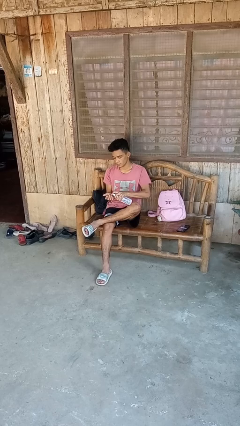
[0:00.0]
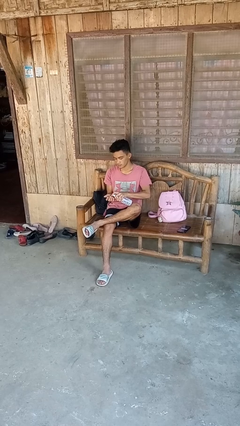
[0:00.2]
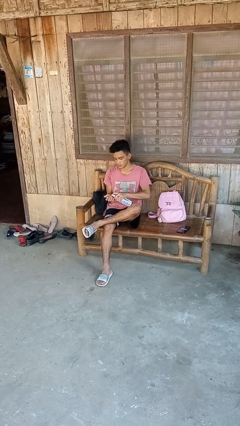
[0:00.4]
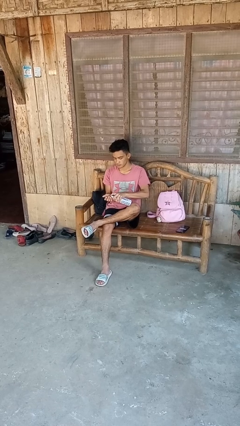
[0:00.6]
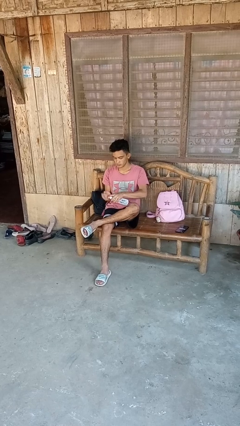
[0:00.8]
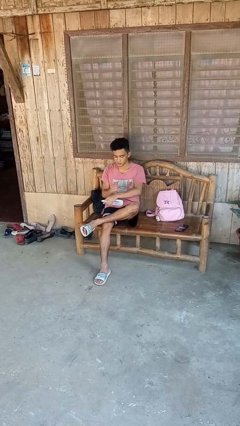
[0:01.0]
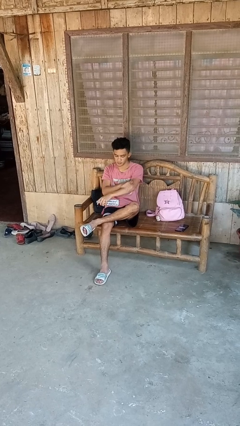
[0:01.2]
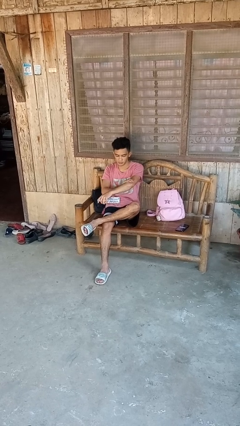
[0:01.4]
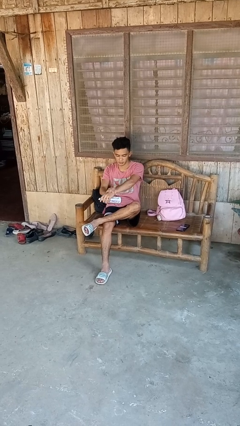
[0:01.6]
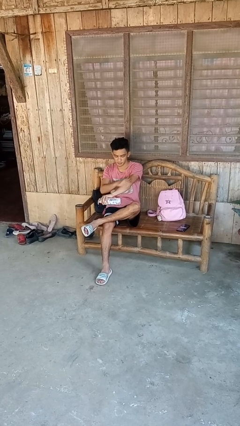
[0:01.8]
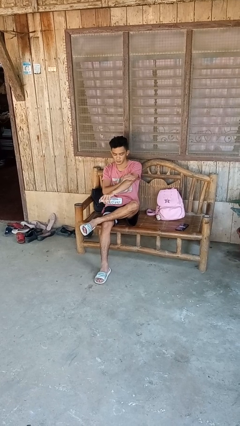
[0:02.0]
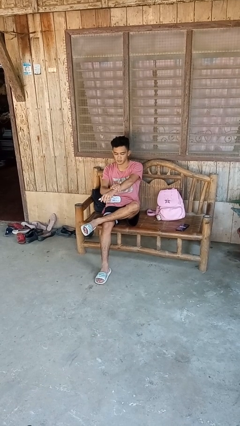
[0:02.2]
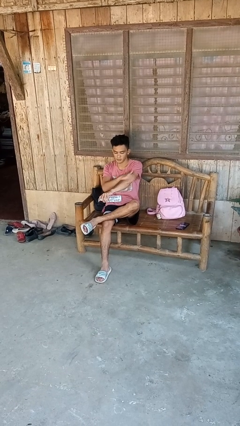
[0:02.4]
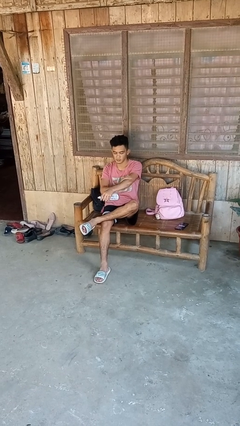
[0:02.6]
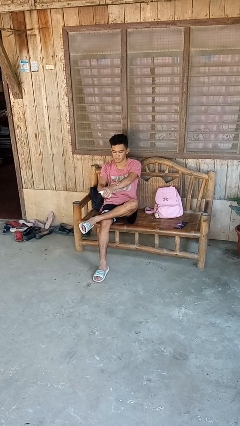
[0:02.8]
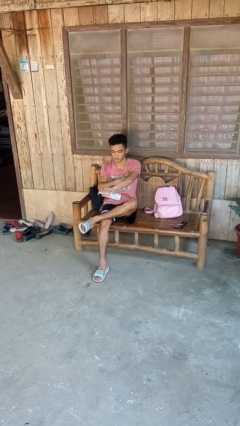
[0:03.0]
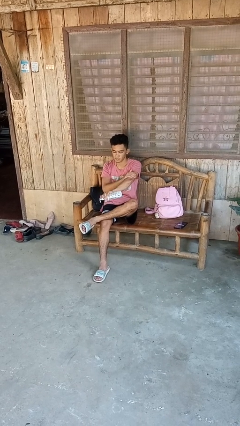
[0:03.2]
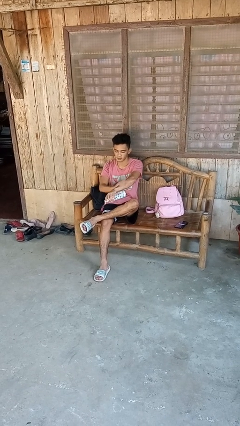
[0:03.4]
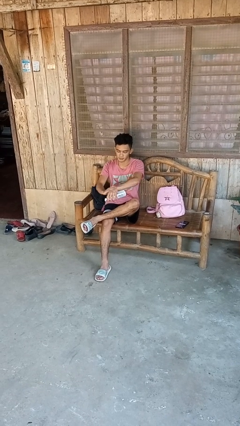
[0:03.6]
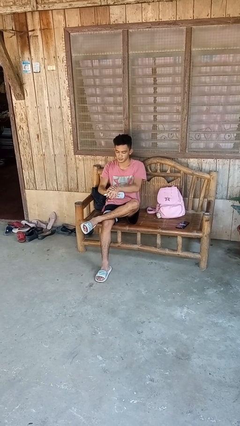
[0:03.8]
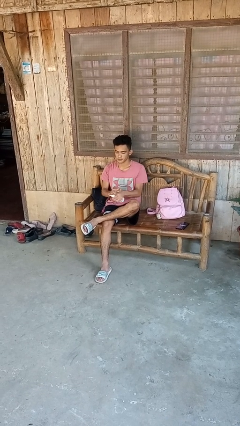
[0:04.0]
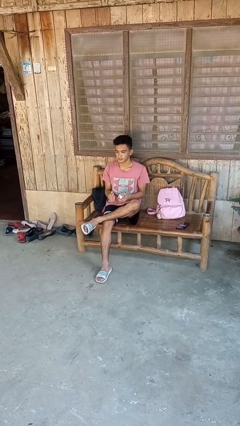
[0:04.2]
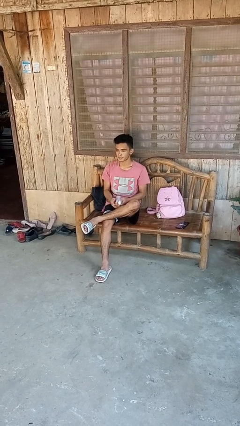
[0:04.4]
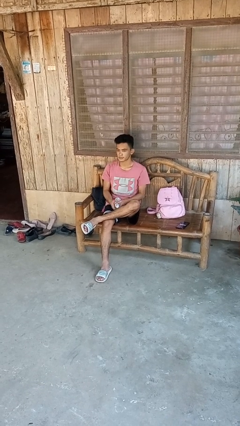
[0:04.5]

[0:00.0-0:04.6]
person applies sunscreen

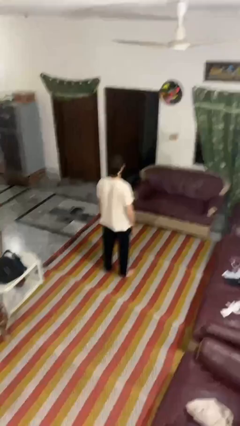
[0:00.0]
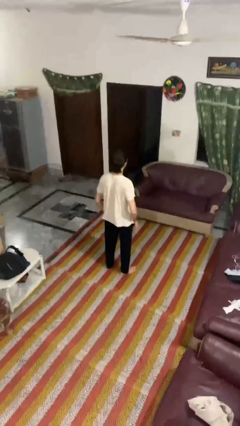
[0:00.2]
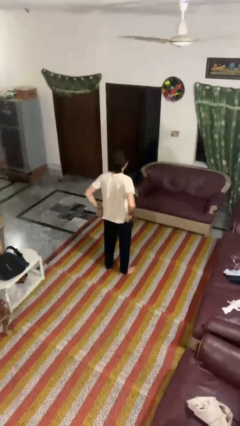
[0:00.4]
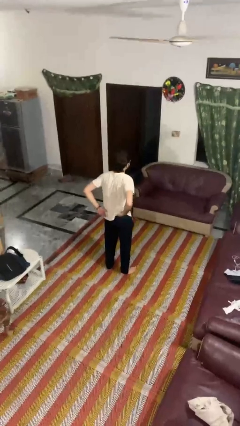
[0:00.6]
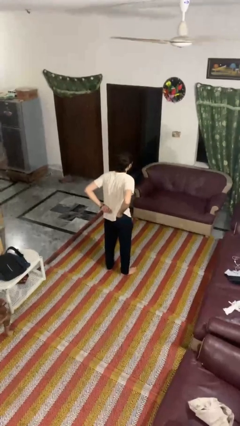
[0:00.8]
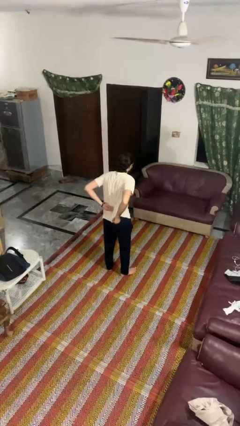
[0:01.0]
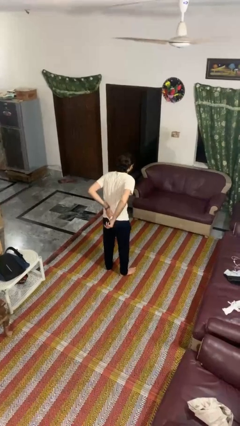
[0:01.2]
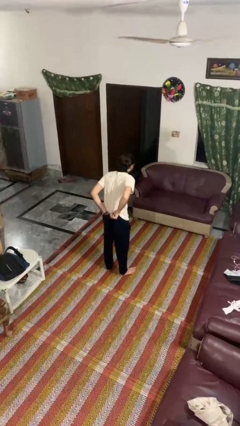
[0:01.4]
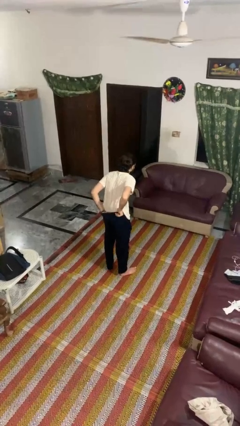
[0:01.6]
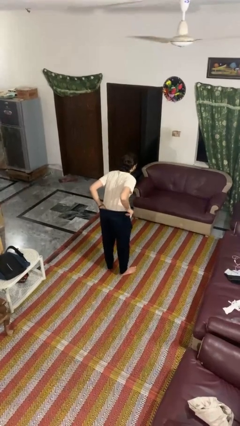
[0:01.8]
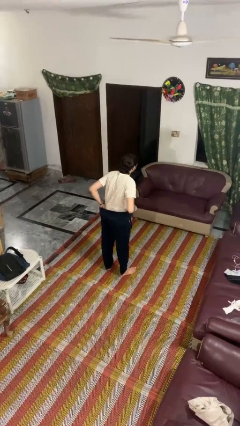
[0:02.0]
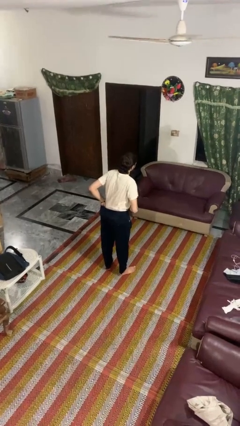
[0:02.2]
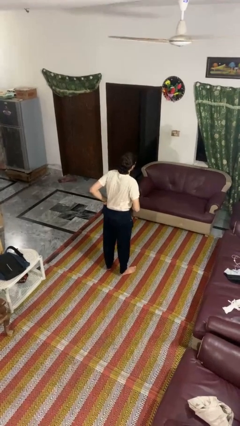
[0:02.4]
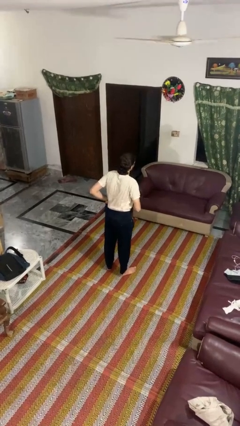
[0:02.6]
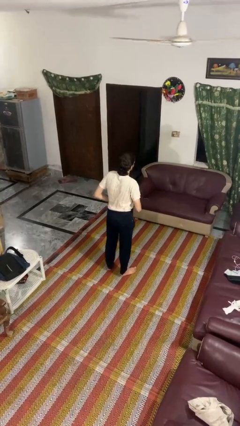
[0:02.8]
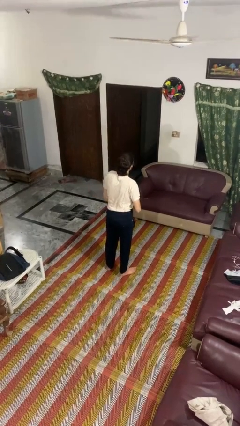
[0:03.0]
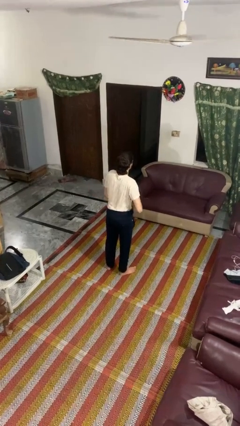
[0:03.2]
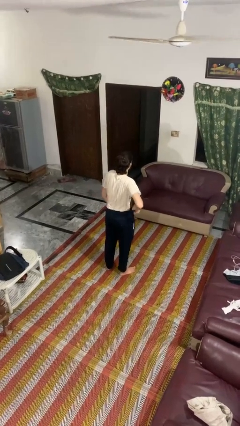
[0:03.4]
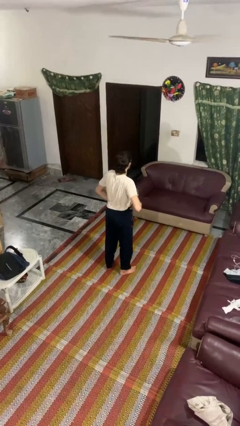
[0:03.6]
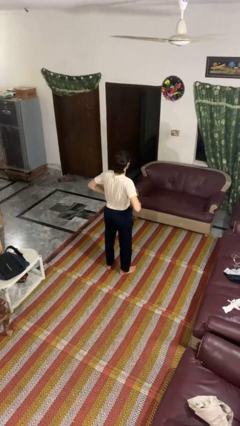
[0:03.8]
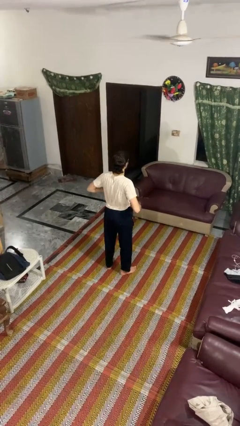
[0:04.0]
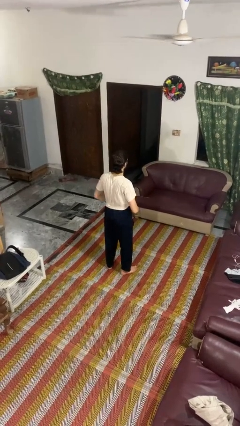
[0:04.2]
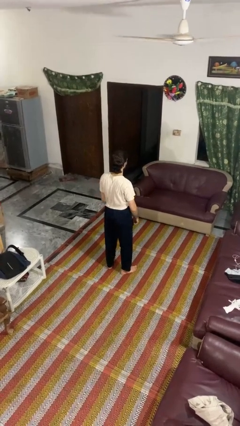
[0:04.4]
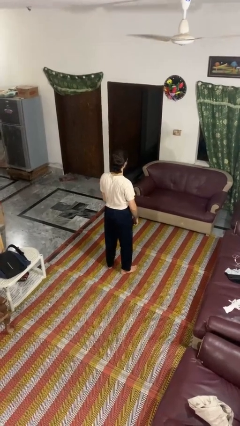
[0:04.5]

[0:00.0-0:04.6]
person tucks in shirt

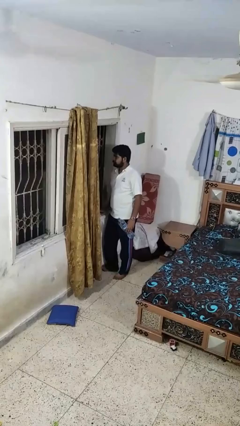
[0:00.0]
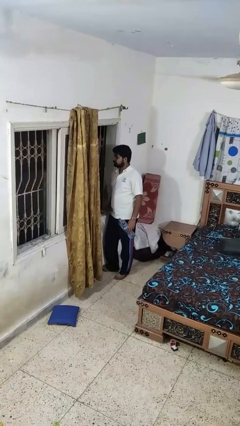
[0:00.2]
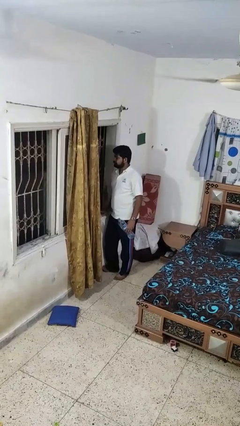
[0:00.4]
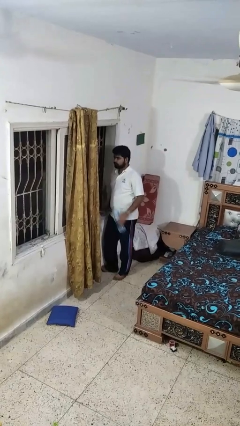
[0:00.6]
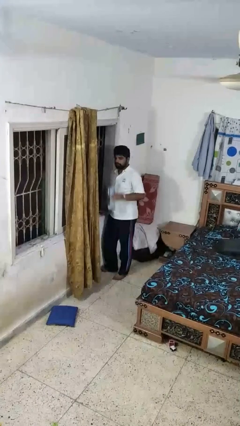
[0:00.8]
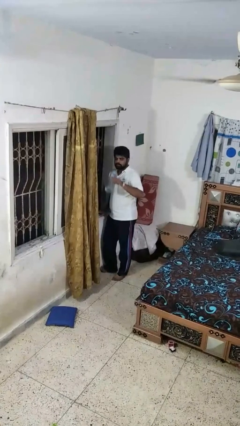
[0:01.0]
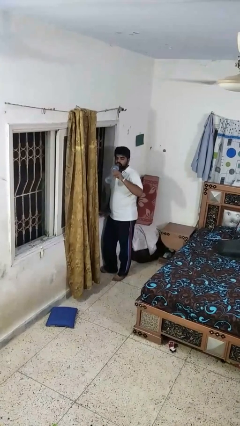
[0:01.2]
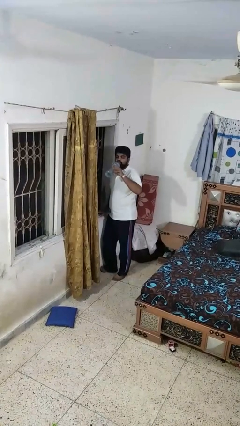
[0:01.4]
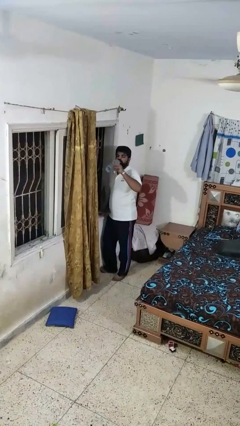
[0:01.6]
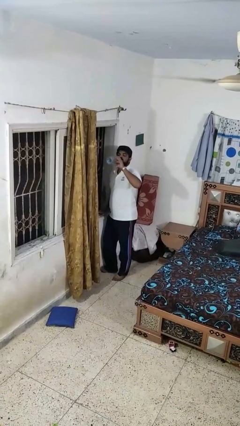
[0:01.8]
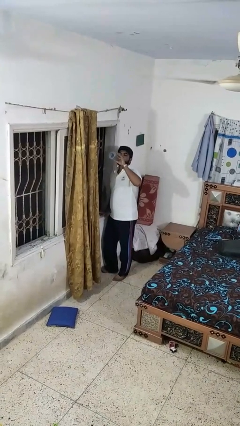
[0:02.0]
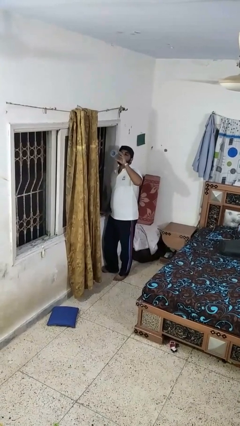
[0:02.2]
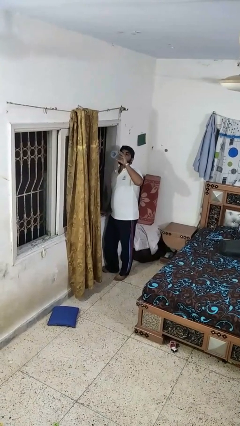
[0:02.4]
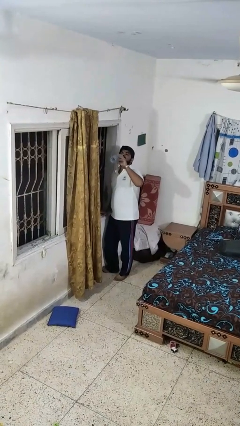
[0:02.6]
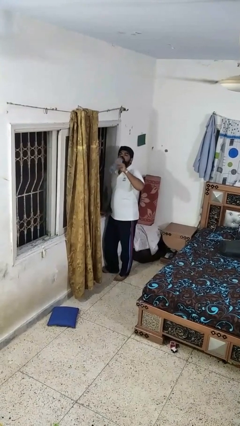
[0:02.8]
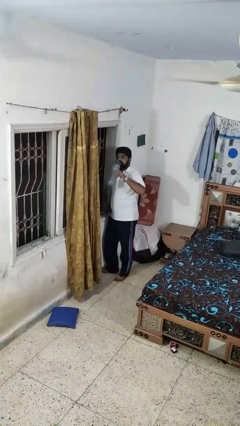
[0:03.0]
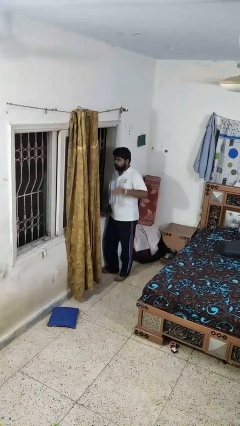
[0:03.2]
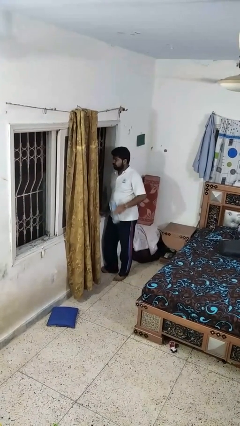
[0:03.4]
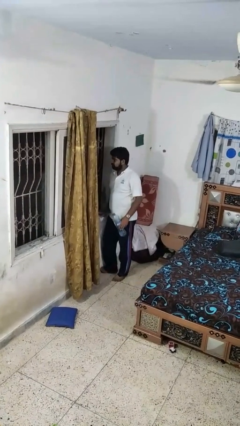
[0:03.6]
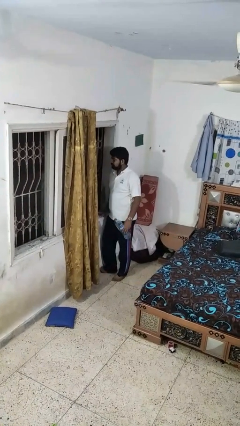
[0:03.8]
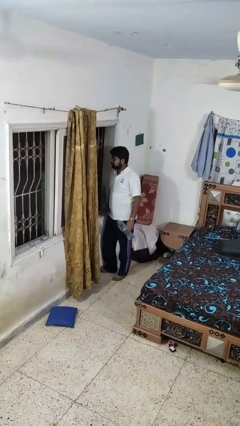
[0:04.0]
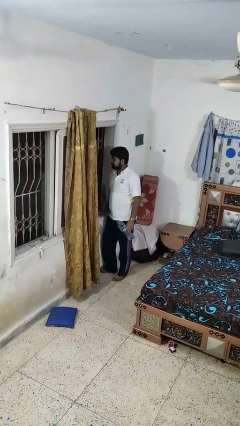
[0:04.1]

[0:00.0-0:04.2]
person drinks from bottle

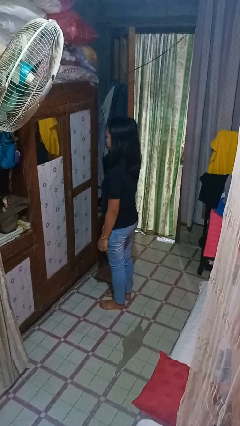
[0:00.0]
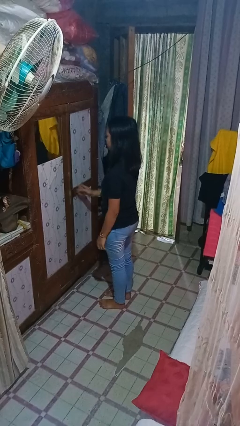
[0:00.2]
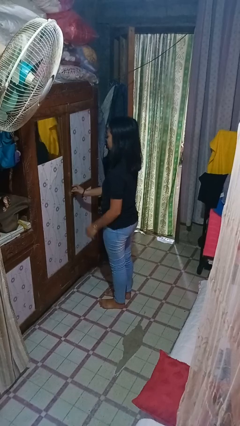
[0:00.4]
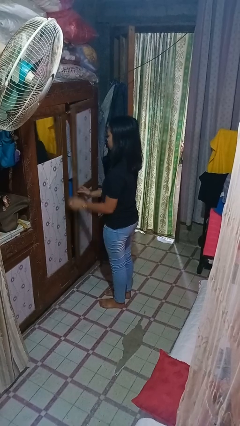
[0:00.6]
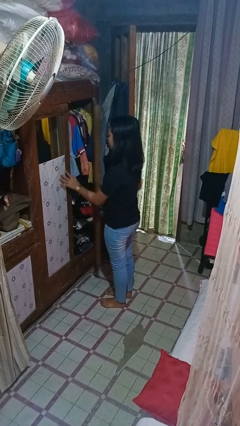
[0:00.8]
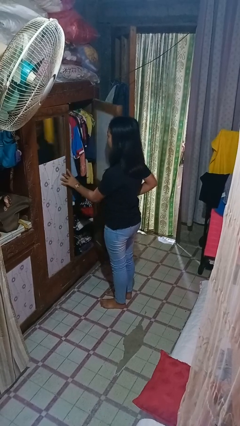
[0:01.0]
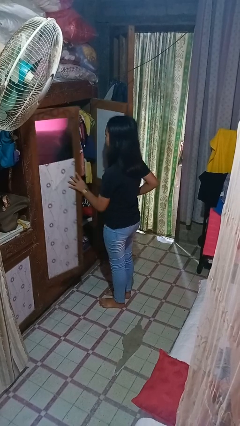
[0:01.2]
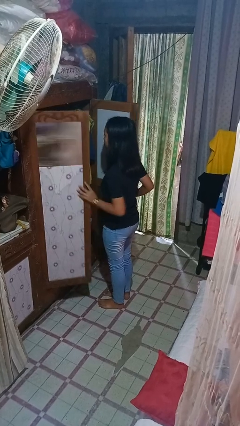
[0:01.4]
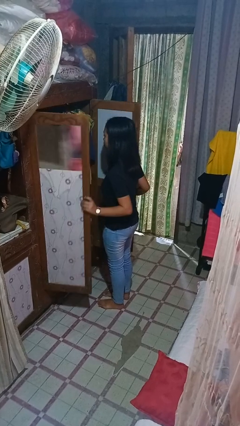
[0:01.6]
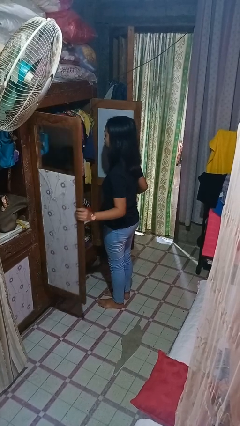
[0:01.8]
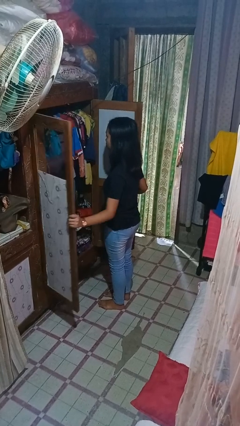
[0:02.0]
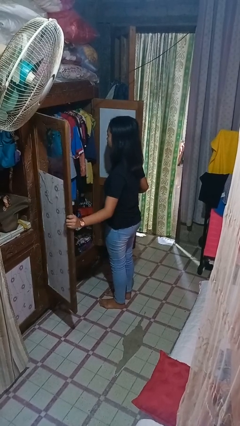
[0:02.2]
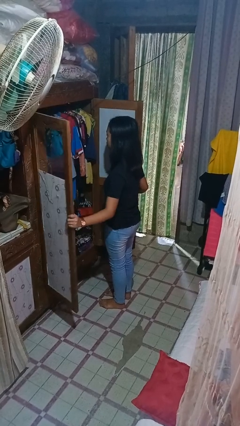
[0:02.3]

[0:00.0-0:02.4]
person opens closet door

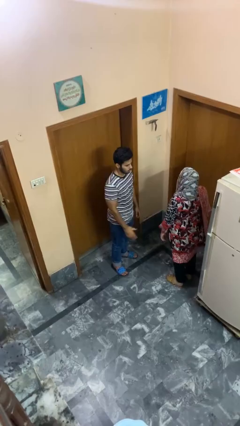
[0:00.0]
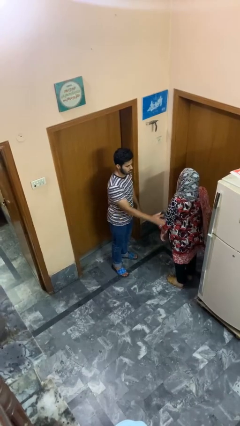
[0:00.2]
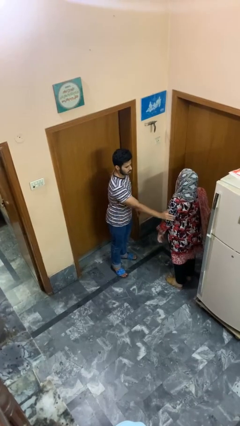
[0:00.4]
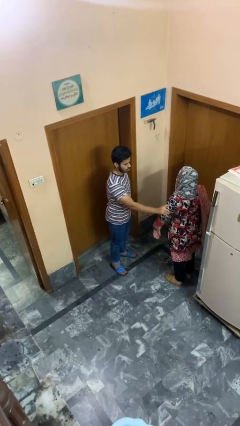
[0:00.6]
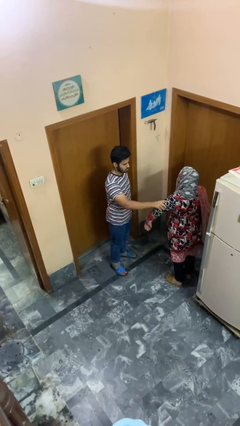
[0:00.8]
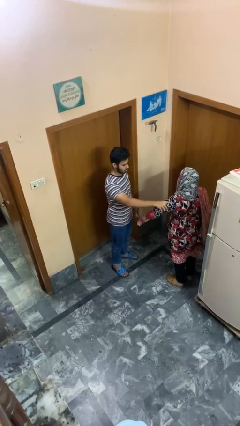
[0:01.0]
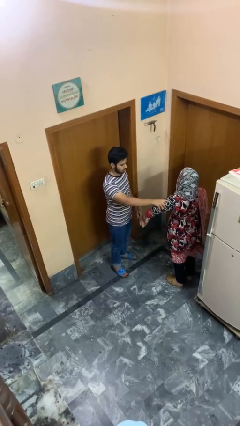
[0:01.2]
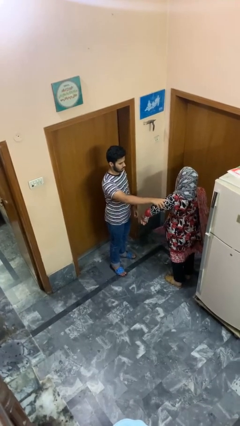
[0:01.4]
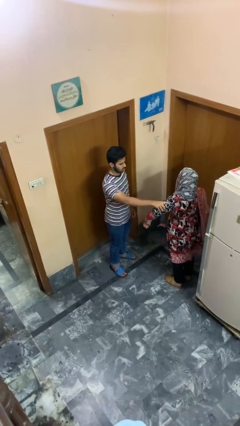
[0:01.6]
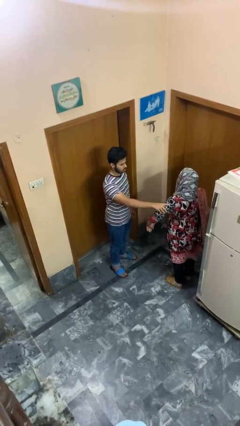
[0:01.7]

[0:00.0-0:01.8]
person grabs person by bicep
